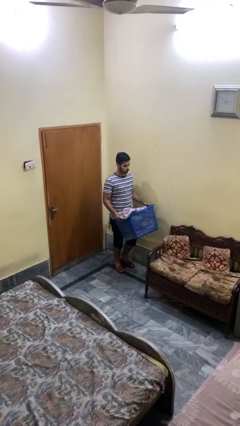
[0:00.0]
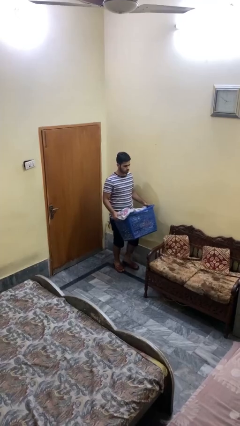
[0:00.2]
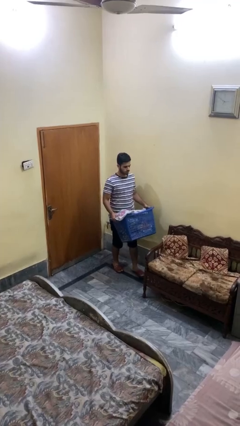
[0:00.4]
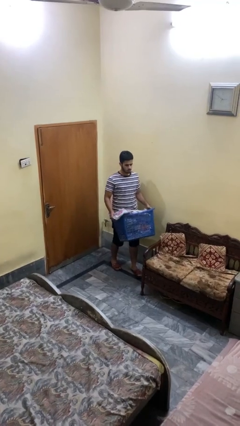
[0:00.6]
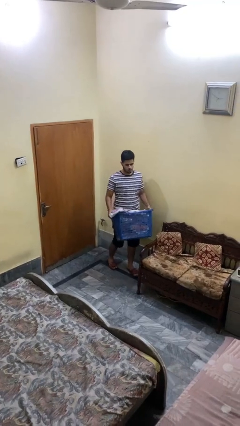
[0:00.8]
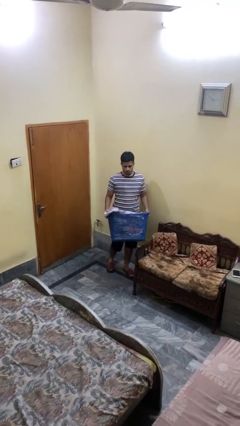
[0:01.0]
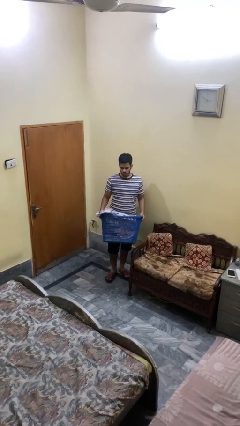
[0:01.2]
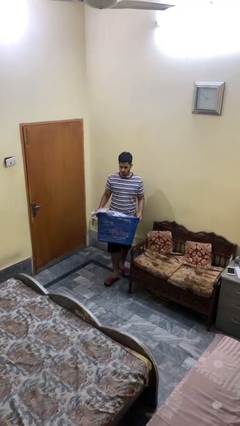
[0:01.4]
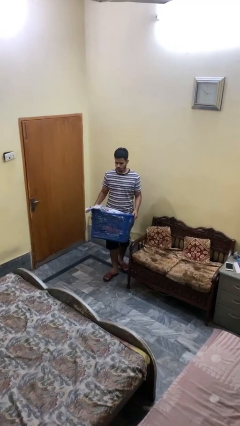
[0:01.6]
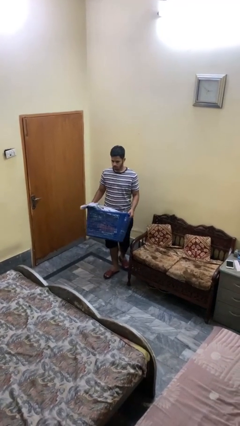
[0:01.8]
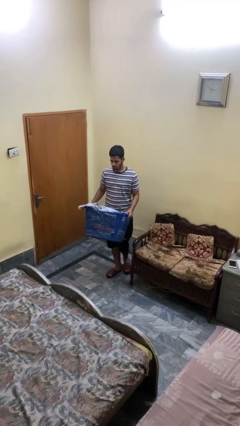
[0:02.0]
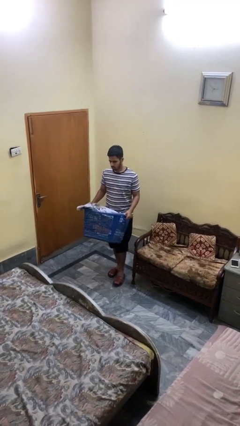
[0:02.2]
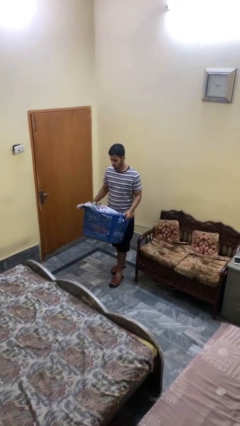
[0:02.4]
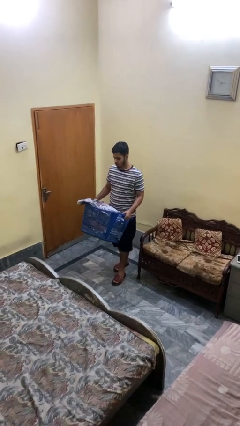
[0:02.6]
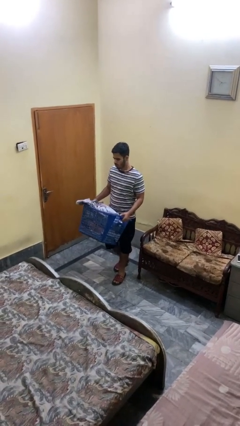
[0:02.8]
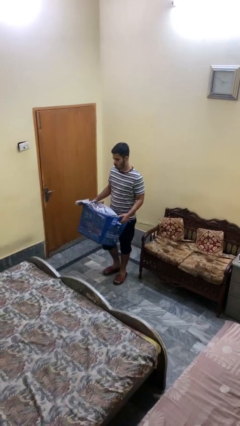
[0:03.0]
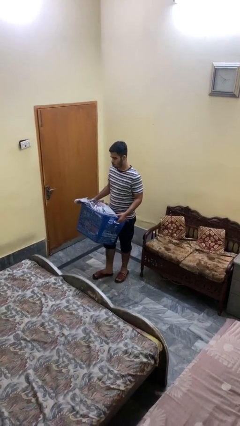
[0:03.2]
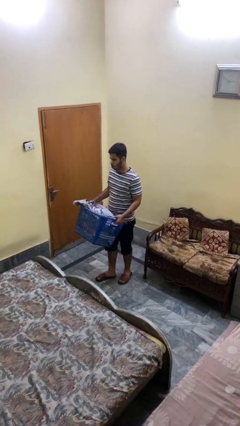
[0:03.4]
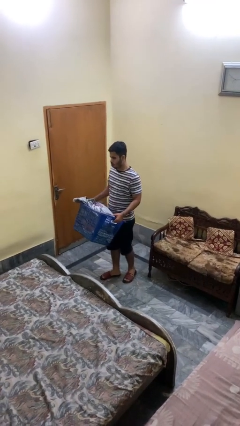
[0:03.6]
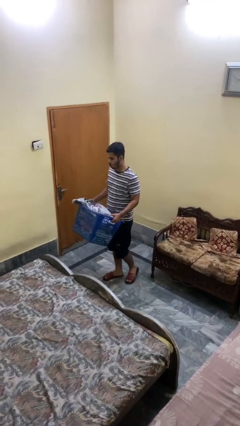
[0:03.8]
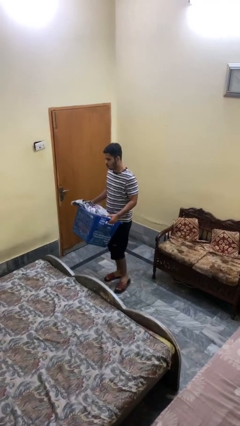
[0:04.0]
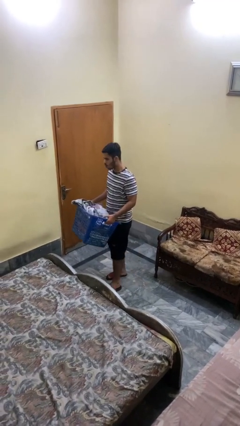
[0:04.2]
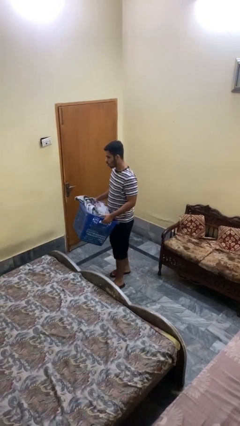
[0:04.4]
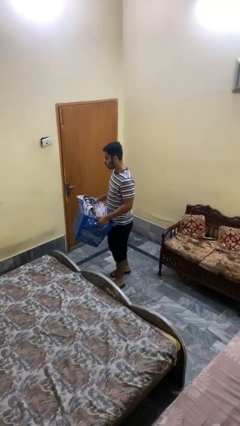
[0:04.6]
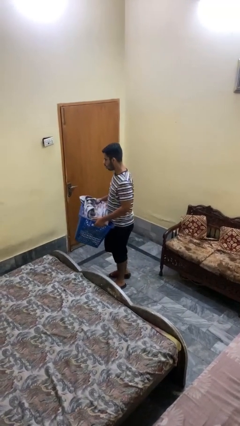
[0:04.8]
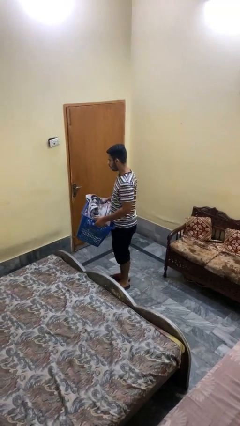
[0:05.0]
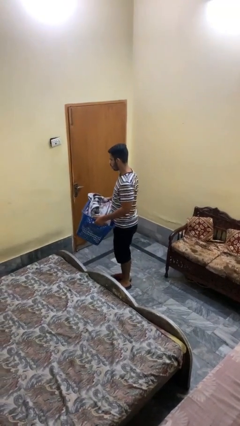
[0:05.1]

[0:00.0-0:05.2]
person carries laundry basket

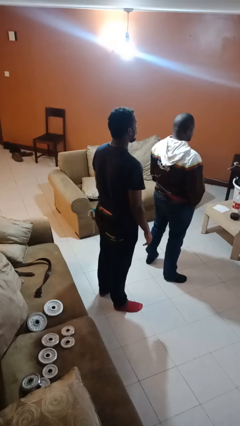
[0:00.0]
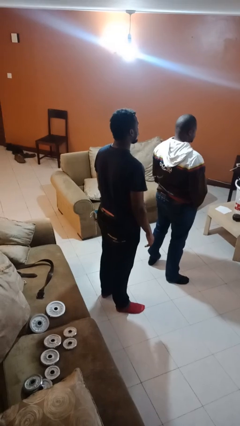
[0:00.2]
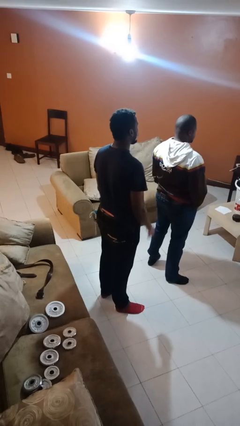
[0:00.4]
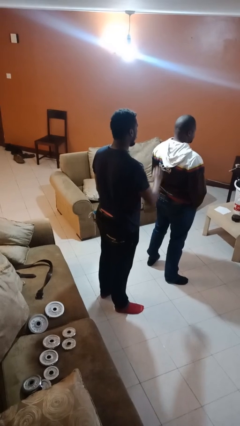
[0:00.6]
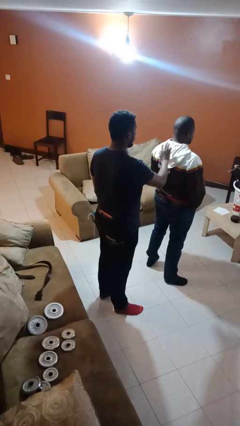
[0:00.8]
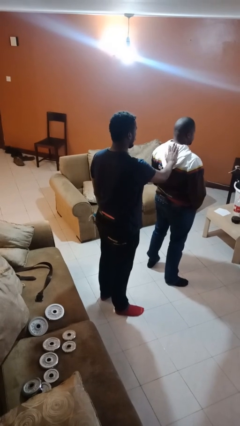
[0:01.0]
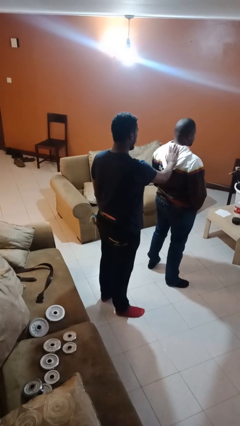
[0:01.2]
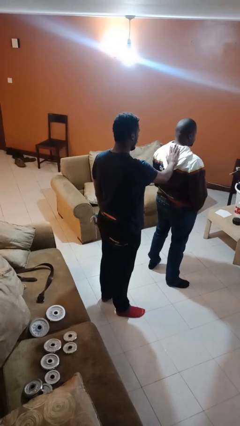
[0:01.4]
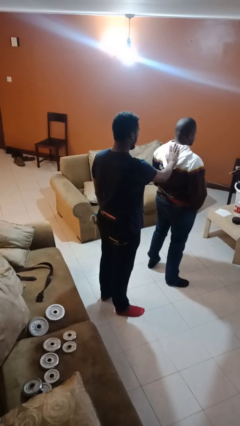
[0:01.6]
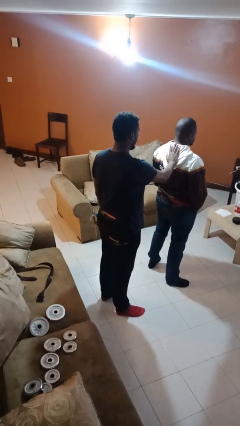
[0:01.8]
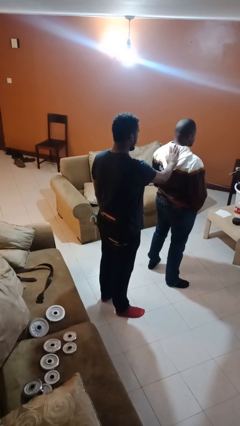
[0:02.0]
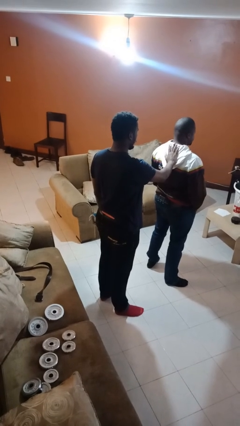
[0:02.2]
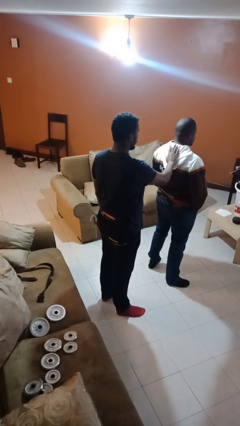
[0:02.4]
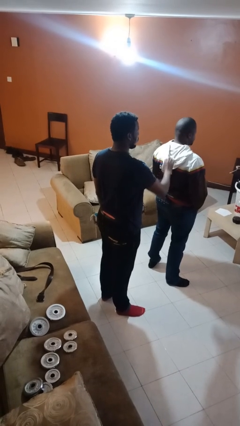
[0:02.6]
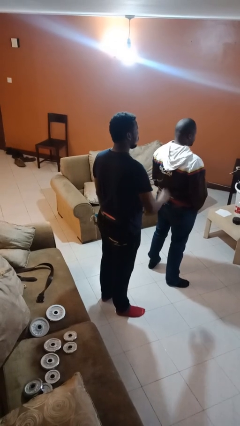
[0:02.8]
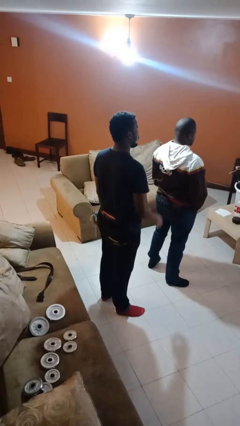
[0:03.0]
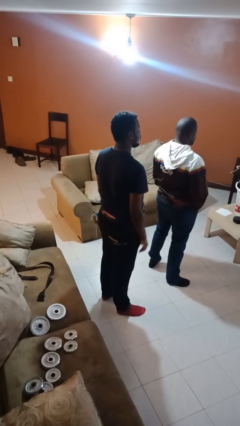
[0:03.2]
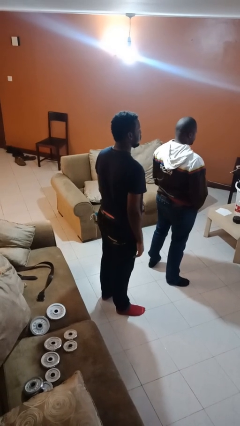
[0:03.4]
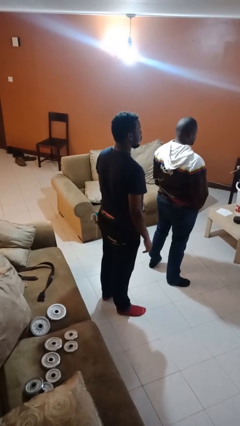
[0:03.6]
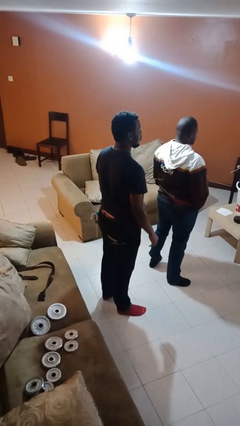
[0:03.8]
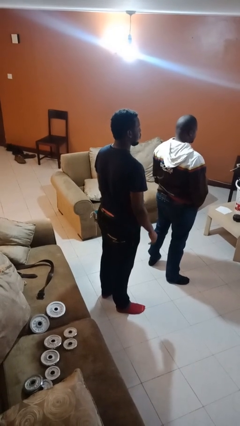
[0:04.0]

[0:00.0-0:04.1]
person touches back of person

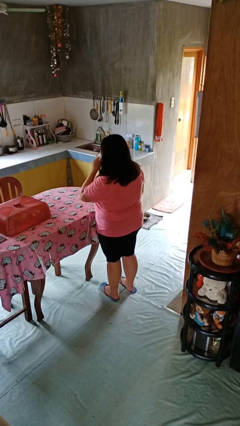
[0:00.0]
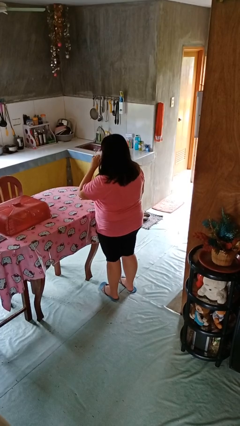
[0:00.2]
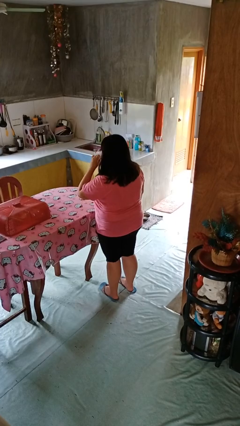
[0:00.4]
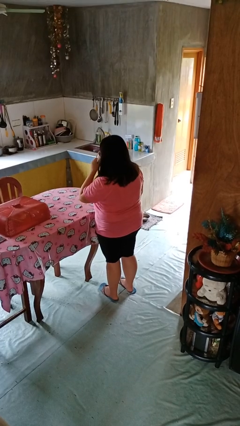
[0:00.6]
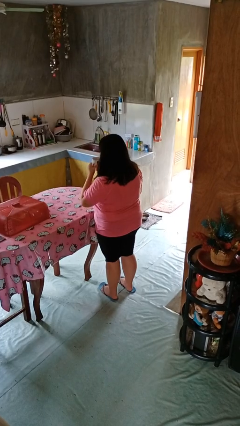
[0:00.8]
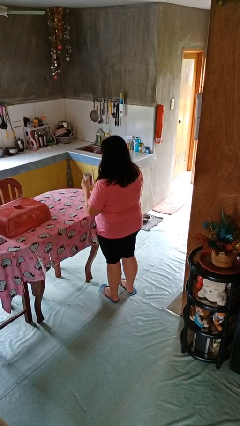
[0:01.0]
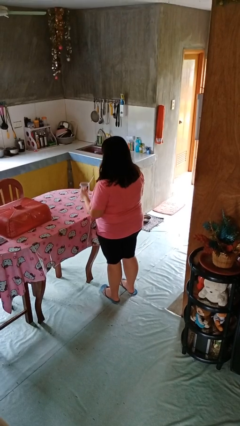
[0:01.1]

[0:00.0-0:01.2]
person drinks from mug

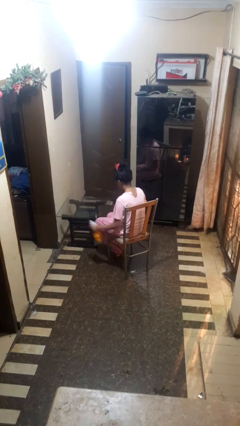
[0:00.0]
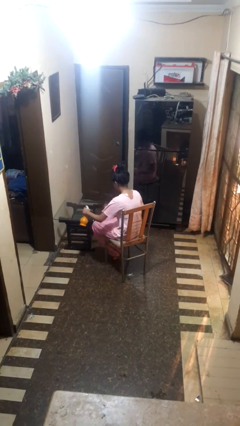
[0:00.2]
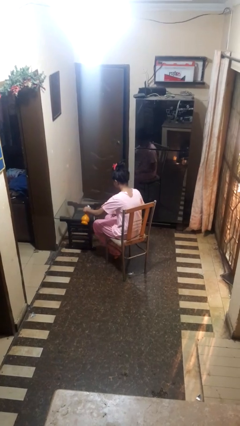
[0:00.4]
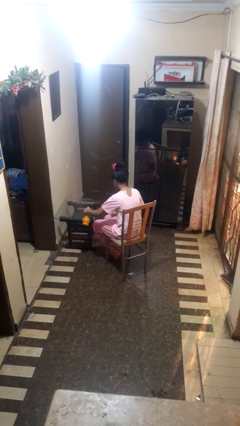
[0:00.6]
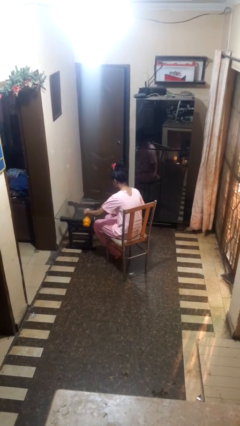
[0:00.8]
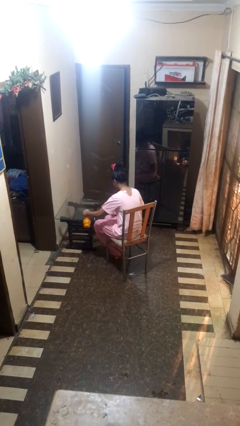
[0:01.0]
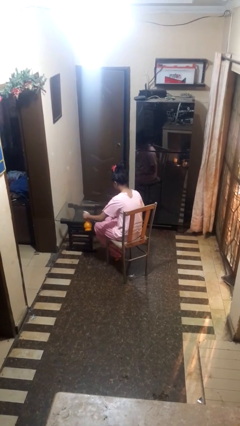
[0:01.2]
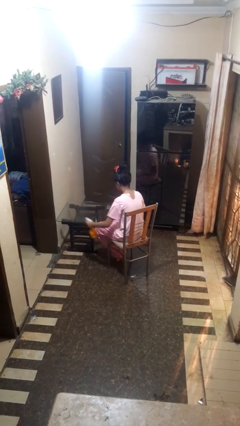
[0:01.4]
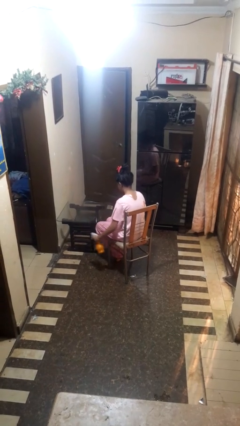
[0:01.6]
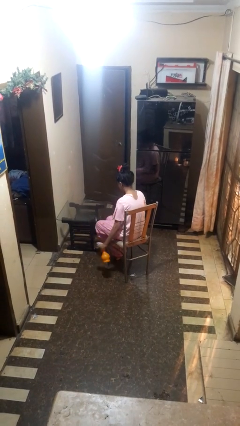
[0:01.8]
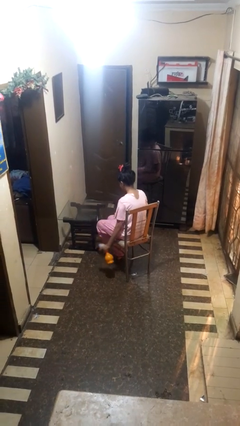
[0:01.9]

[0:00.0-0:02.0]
person sprays from bottle

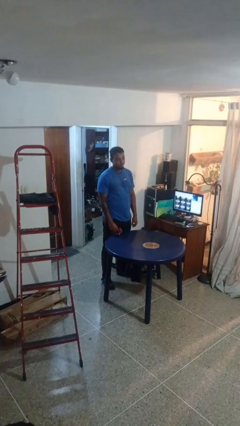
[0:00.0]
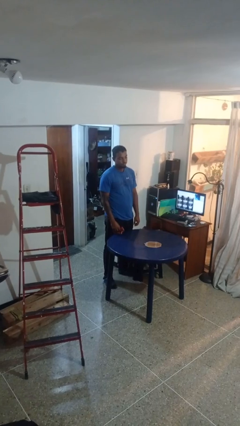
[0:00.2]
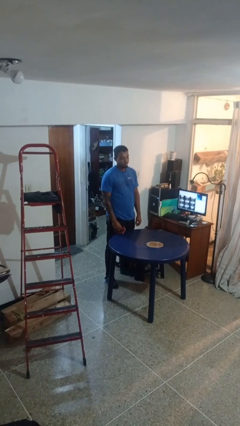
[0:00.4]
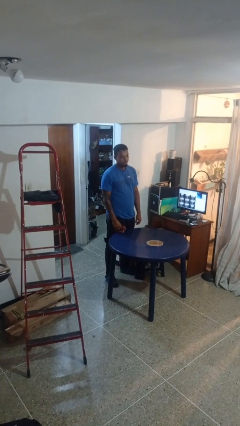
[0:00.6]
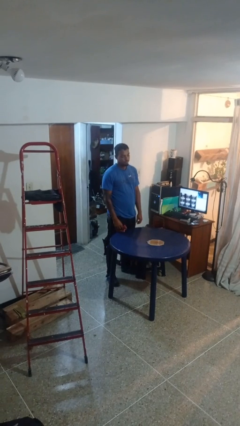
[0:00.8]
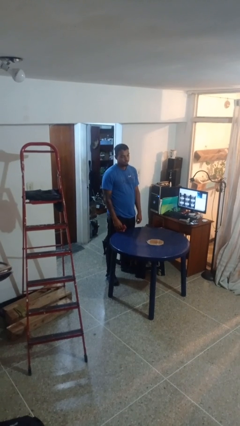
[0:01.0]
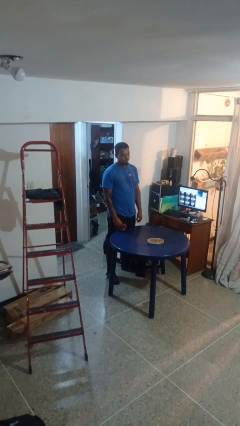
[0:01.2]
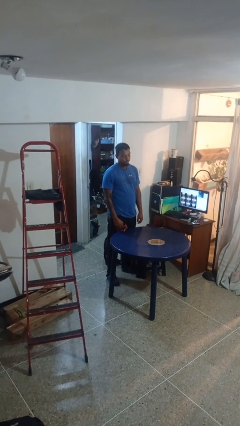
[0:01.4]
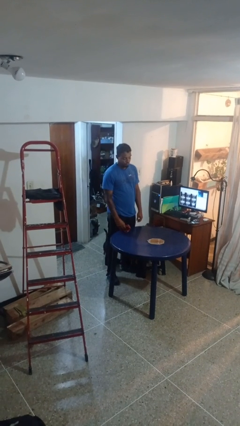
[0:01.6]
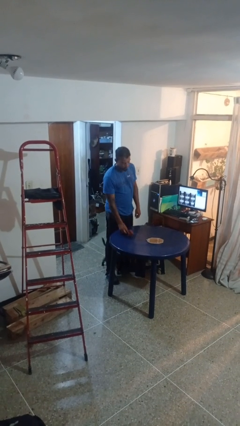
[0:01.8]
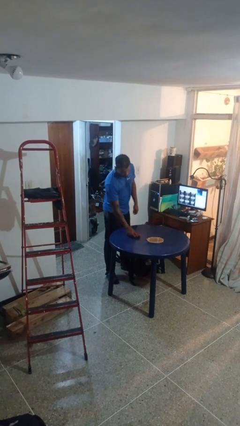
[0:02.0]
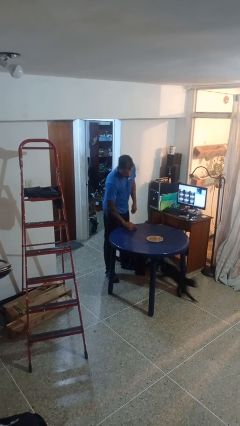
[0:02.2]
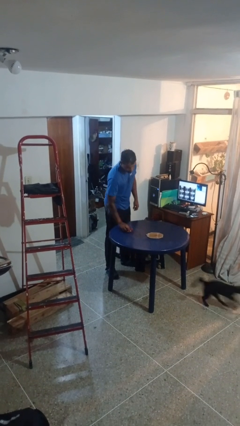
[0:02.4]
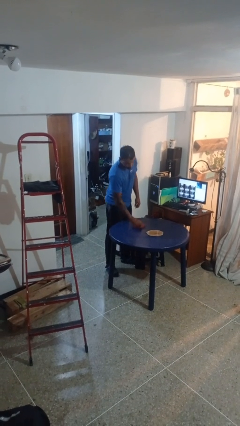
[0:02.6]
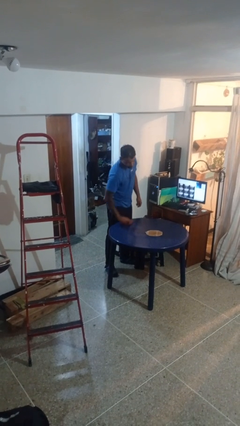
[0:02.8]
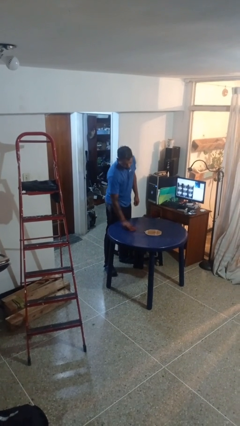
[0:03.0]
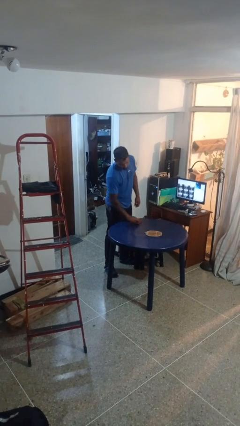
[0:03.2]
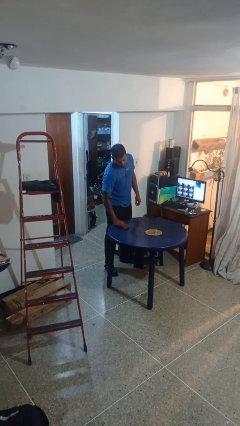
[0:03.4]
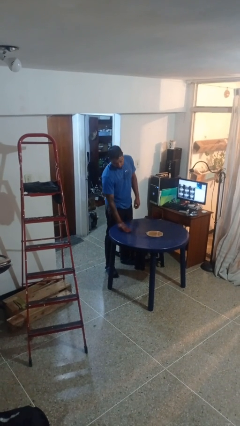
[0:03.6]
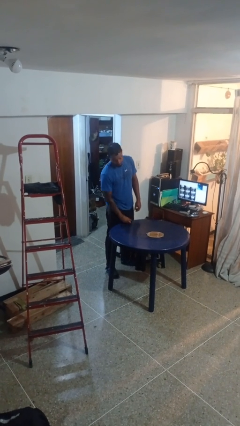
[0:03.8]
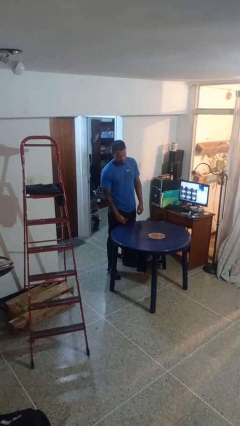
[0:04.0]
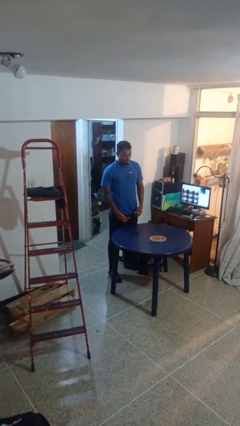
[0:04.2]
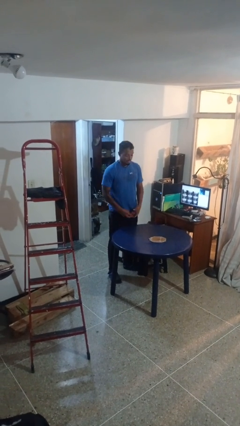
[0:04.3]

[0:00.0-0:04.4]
person cleans table with rag

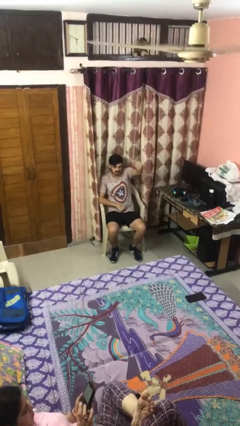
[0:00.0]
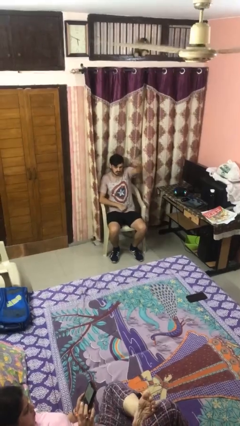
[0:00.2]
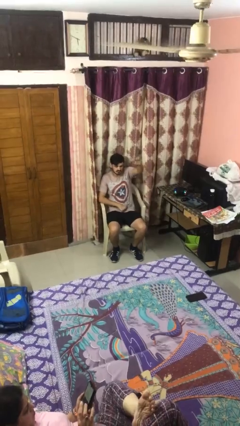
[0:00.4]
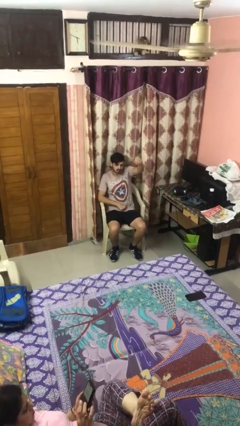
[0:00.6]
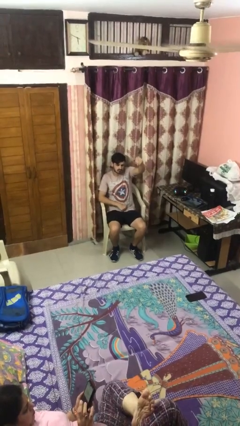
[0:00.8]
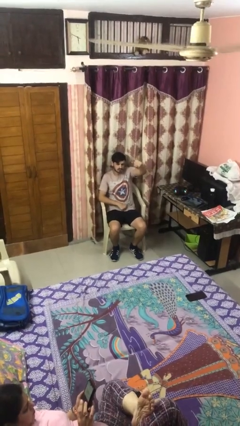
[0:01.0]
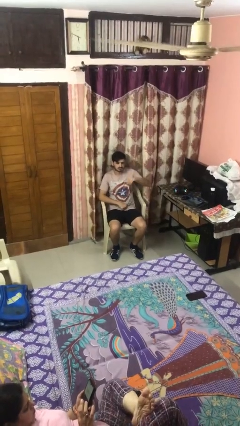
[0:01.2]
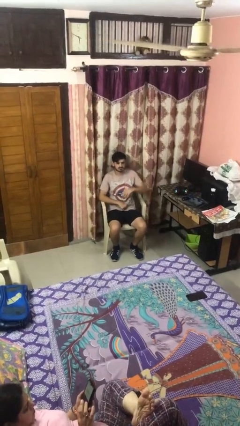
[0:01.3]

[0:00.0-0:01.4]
person gestures come here
